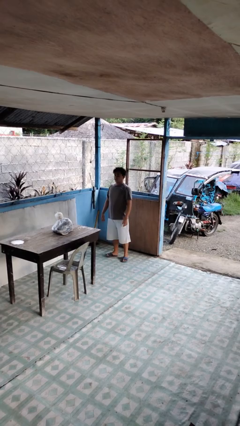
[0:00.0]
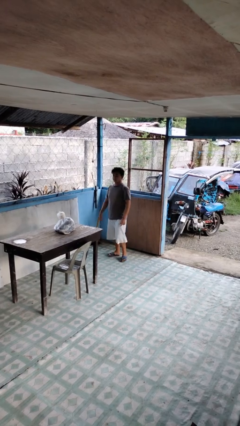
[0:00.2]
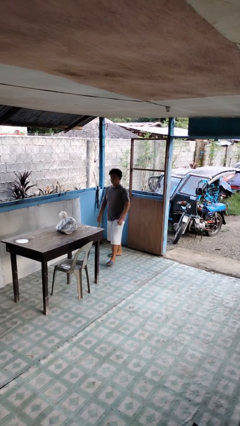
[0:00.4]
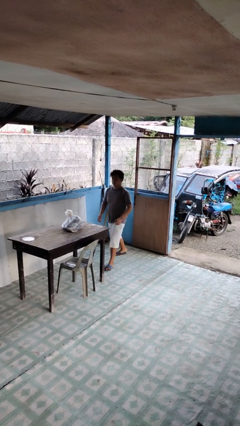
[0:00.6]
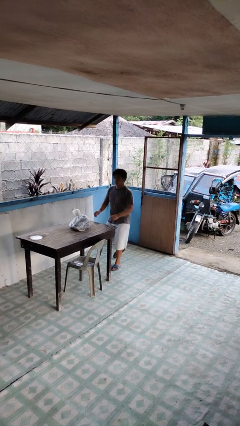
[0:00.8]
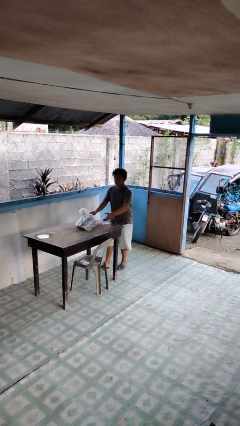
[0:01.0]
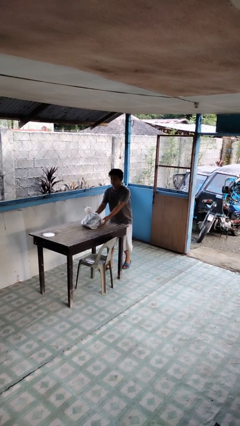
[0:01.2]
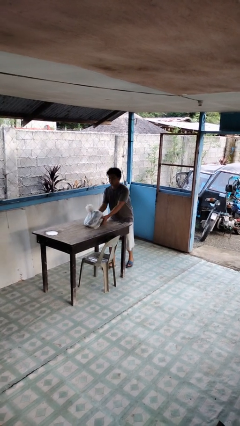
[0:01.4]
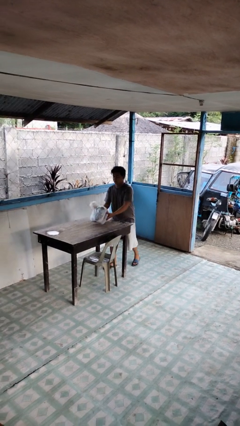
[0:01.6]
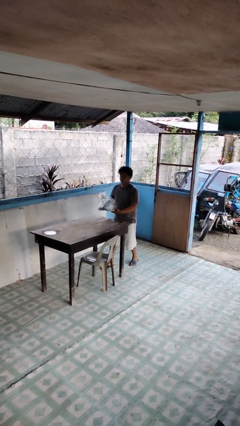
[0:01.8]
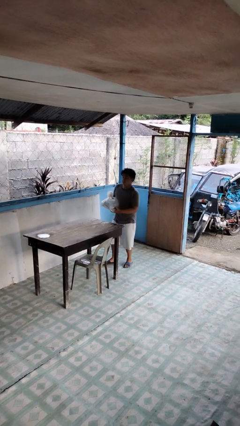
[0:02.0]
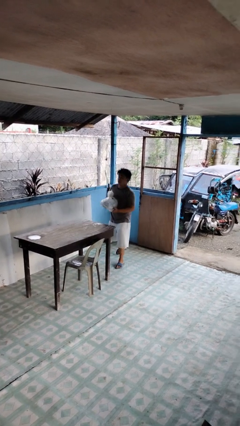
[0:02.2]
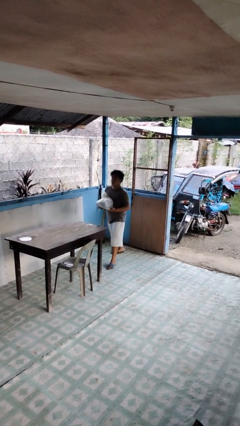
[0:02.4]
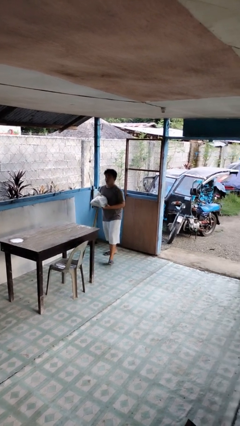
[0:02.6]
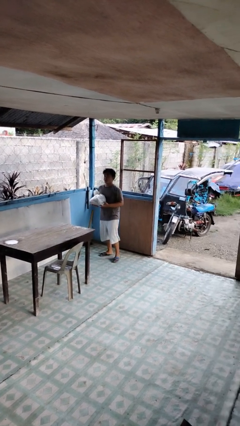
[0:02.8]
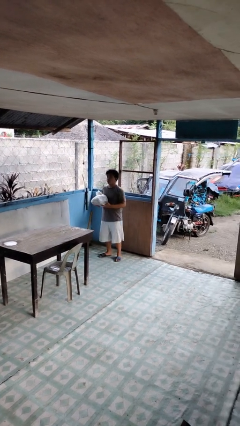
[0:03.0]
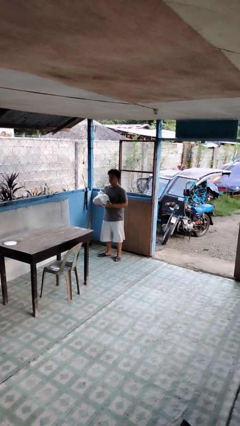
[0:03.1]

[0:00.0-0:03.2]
person picks up object from table

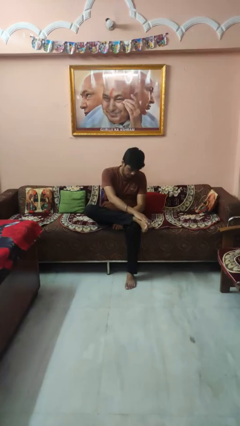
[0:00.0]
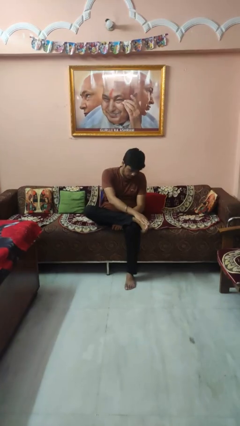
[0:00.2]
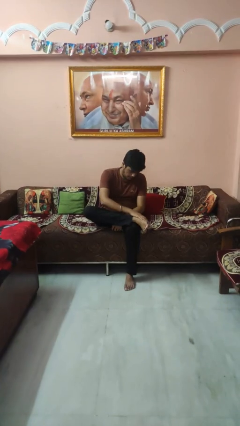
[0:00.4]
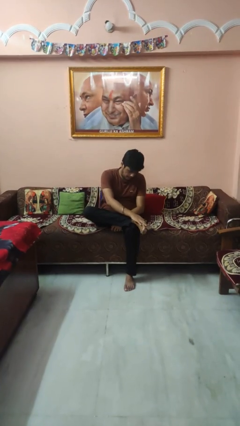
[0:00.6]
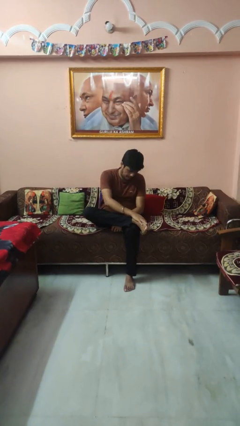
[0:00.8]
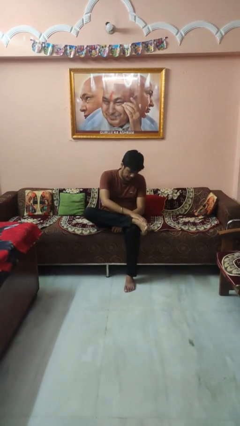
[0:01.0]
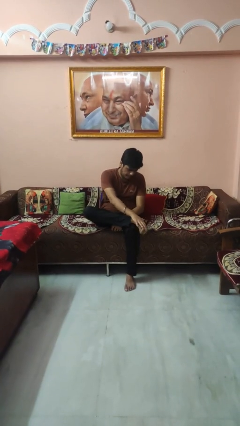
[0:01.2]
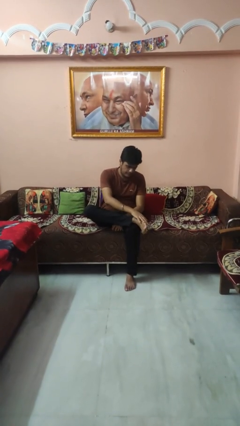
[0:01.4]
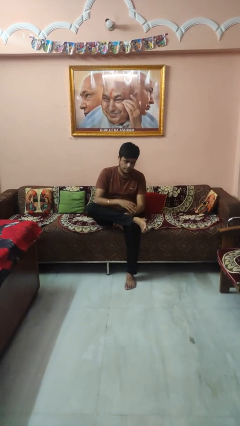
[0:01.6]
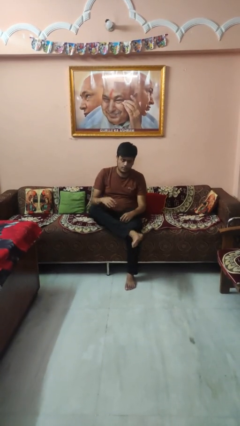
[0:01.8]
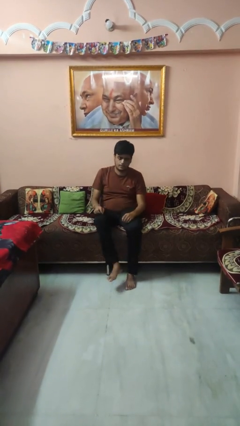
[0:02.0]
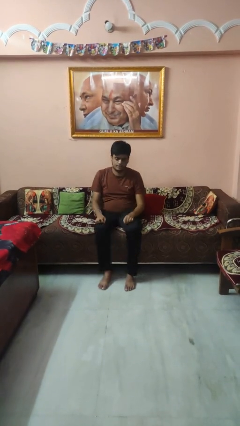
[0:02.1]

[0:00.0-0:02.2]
person rubs foot

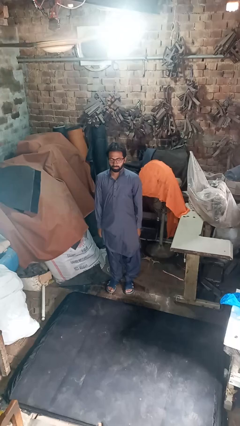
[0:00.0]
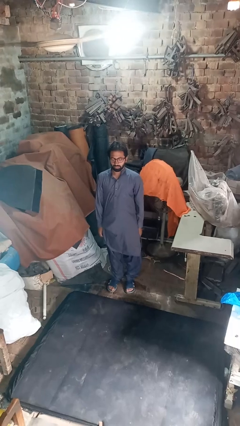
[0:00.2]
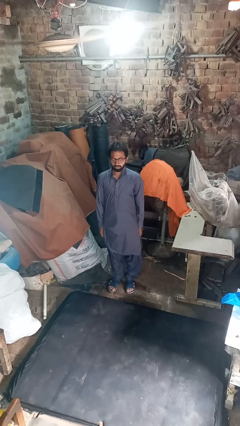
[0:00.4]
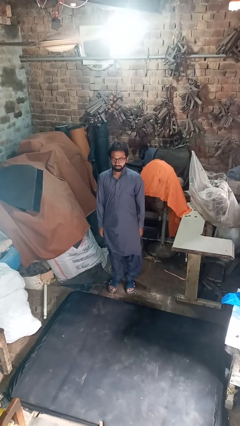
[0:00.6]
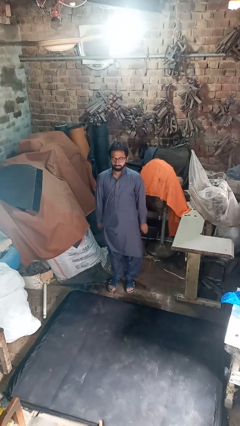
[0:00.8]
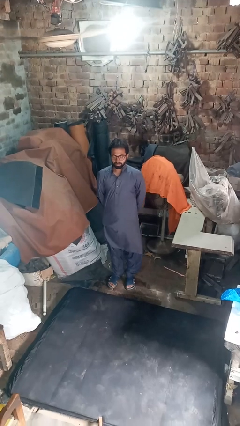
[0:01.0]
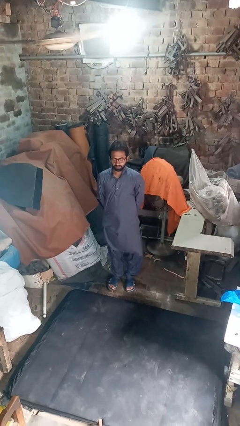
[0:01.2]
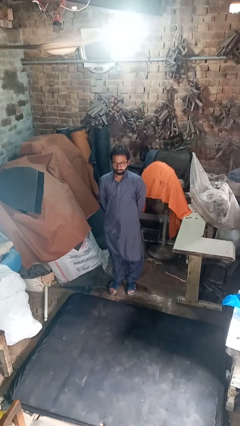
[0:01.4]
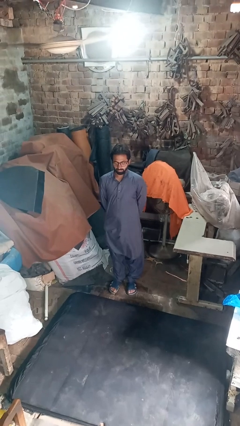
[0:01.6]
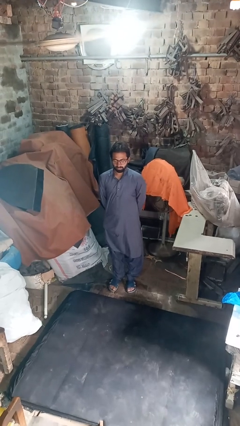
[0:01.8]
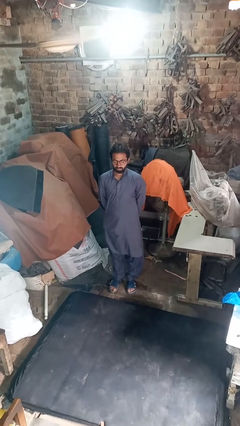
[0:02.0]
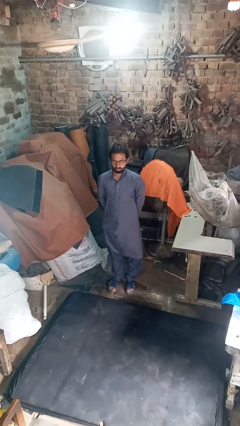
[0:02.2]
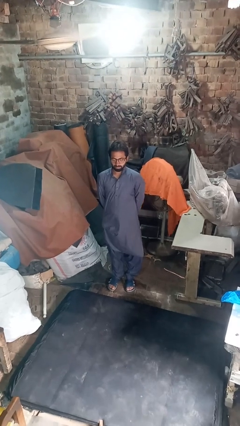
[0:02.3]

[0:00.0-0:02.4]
person stretches back

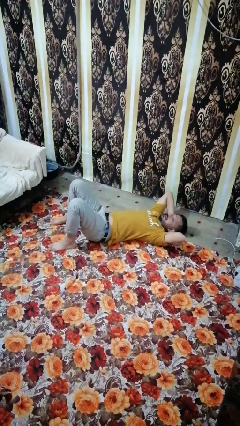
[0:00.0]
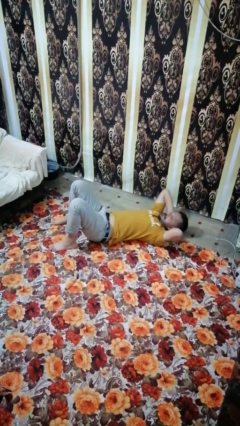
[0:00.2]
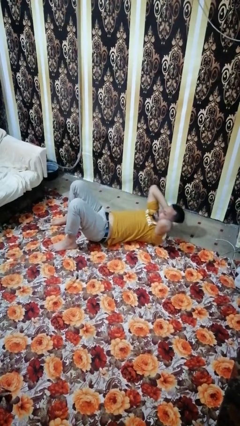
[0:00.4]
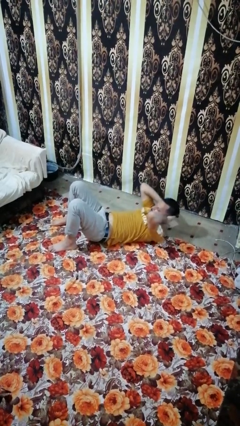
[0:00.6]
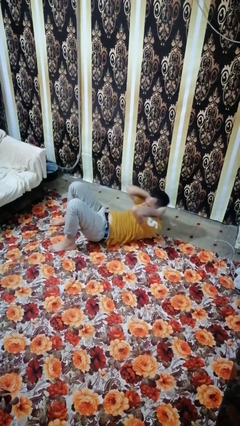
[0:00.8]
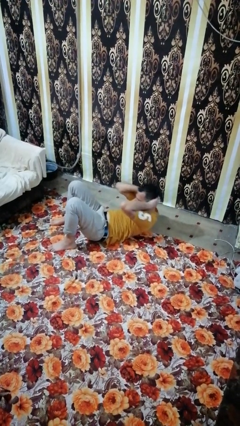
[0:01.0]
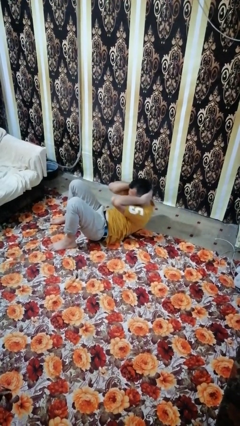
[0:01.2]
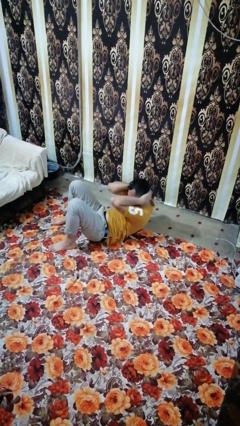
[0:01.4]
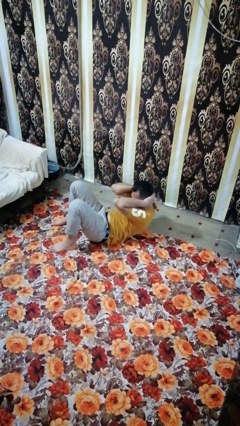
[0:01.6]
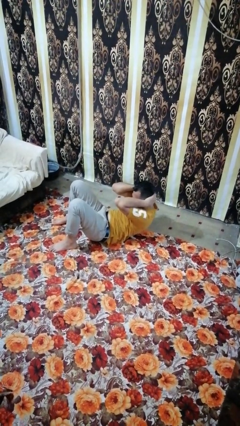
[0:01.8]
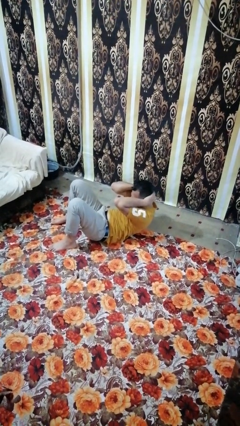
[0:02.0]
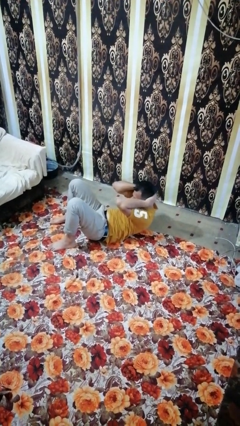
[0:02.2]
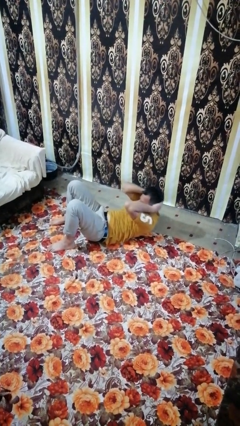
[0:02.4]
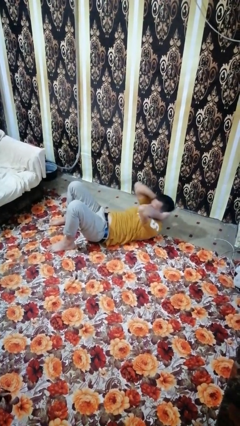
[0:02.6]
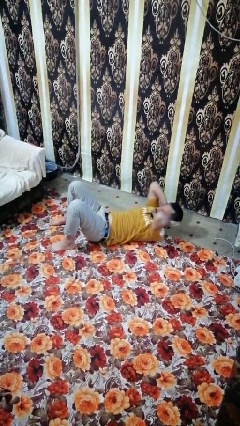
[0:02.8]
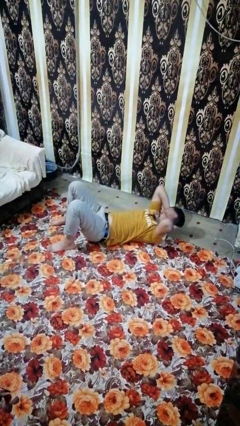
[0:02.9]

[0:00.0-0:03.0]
person exercises with situp

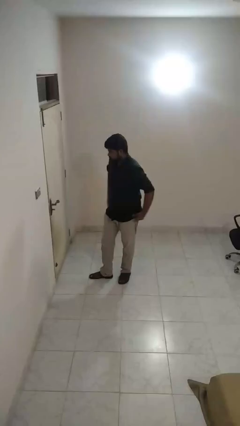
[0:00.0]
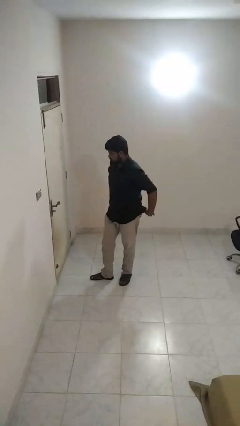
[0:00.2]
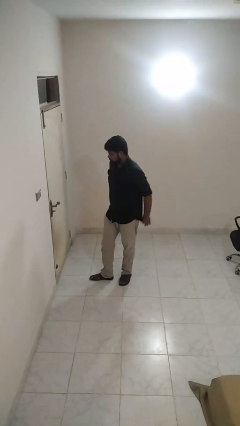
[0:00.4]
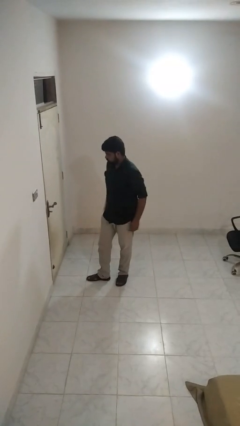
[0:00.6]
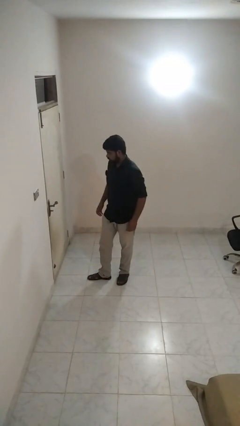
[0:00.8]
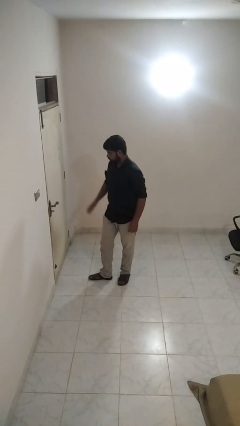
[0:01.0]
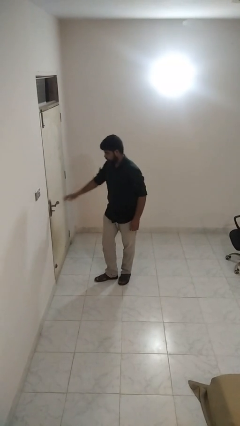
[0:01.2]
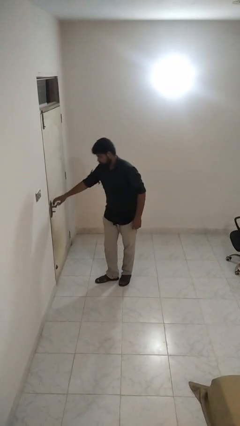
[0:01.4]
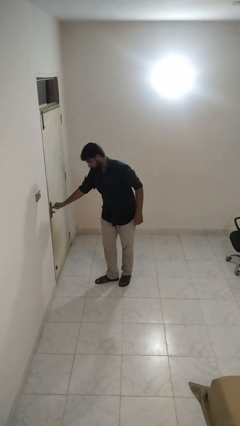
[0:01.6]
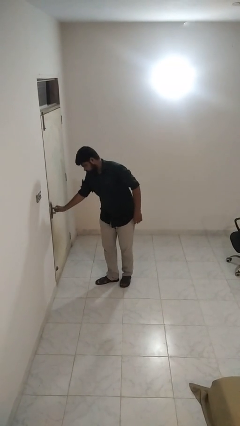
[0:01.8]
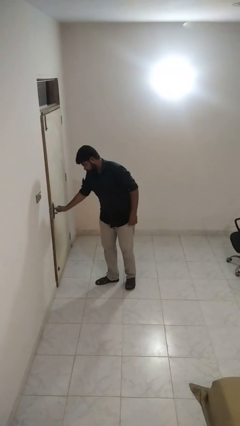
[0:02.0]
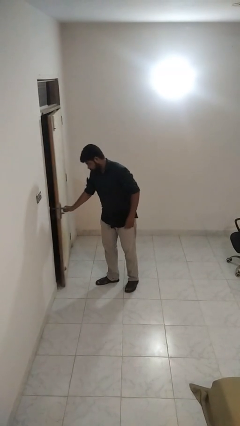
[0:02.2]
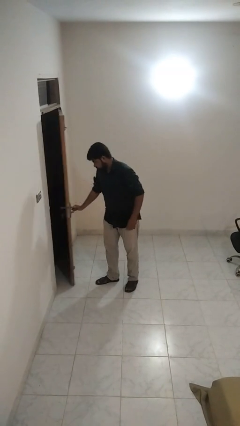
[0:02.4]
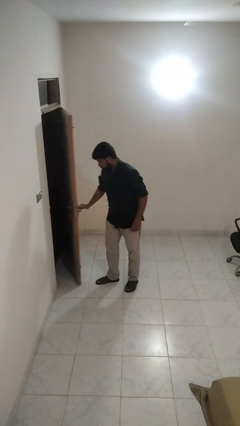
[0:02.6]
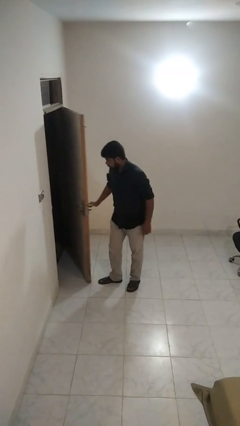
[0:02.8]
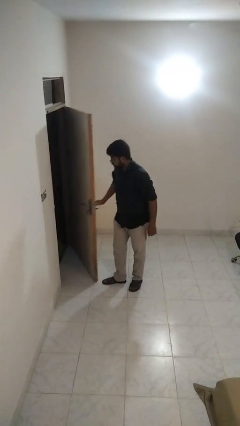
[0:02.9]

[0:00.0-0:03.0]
person opens facility door

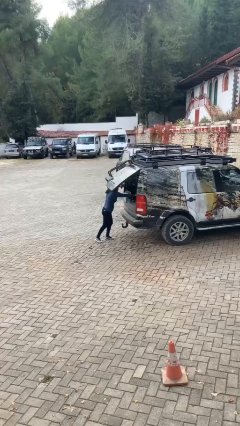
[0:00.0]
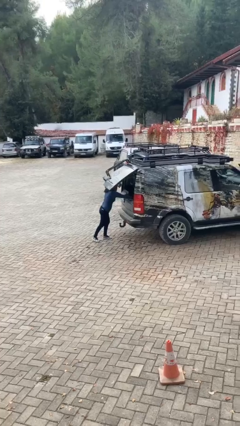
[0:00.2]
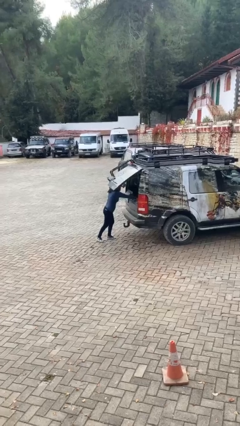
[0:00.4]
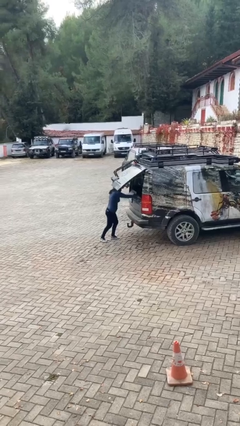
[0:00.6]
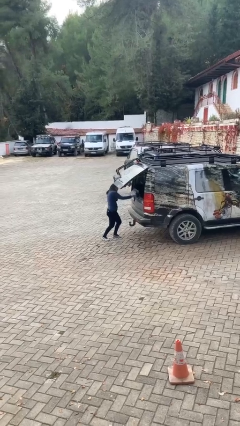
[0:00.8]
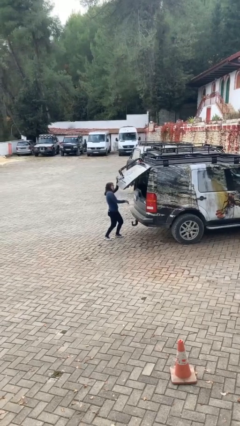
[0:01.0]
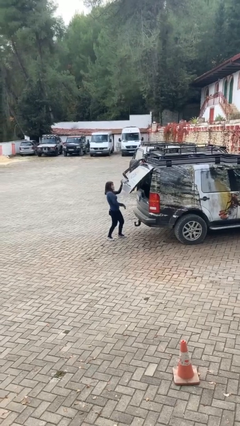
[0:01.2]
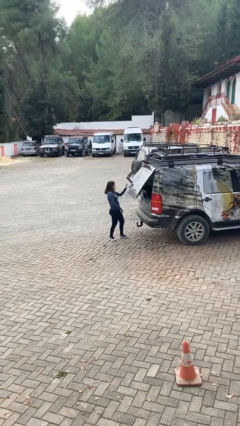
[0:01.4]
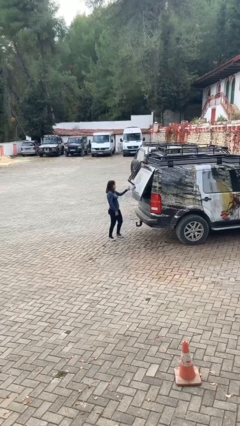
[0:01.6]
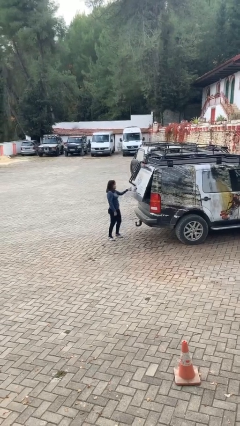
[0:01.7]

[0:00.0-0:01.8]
person loads car

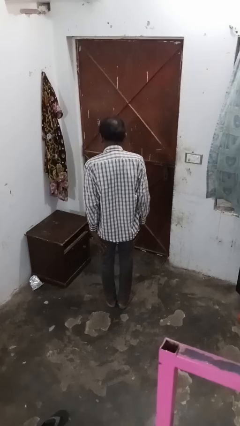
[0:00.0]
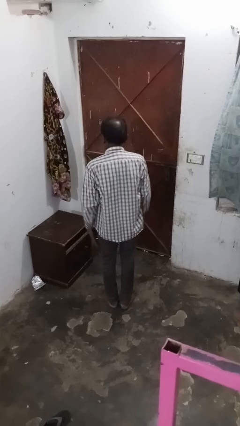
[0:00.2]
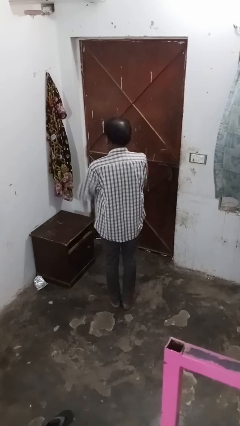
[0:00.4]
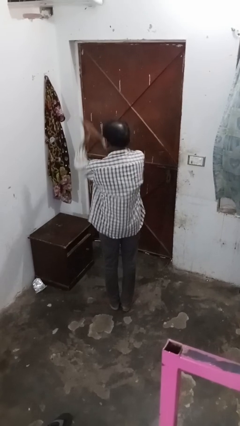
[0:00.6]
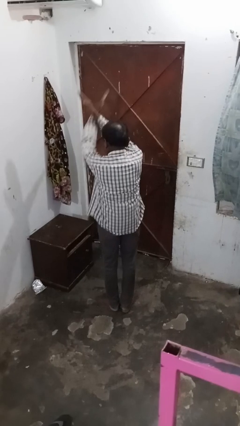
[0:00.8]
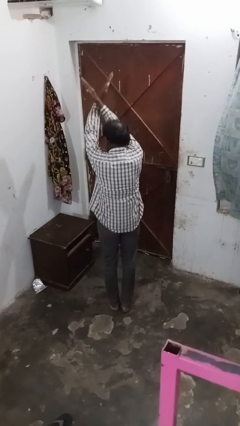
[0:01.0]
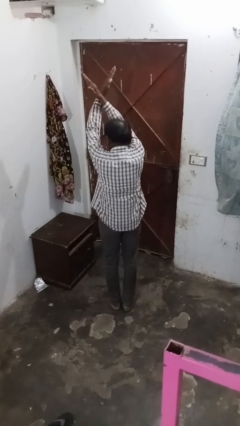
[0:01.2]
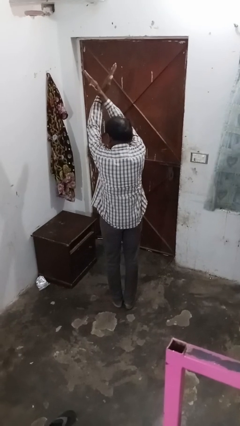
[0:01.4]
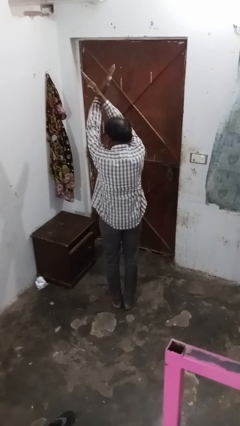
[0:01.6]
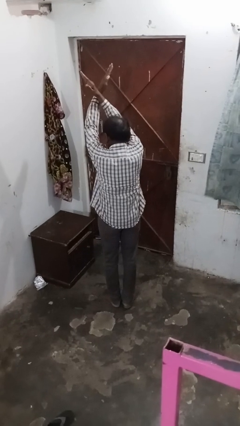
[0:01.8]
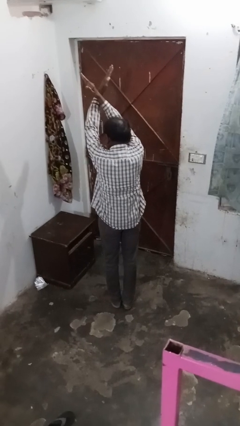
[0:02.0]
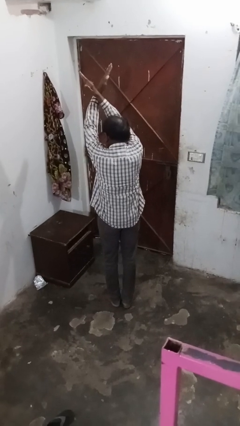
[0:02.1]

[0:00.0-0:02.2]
person gestures arms x
